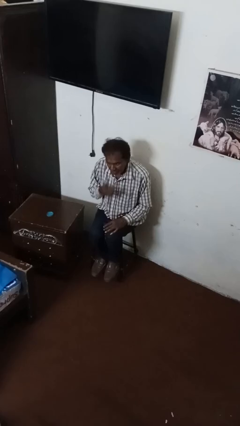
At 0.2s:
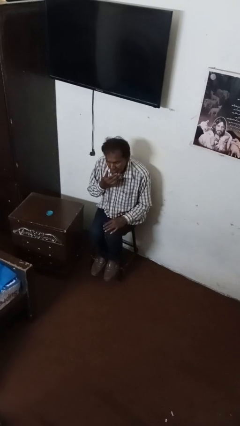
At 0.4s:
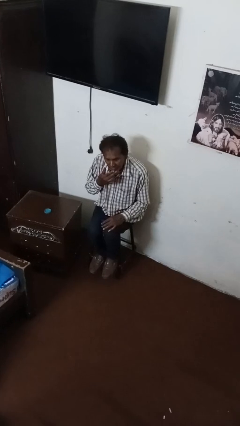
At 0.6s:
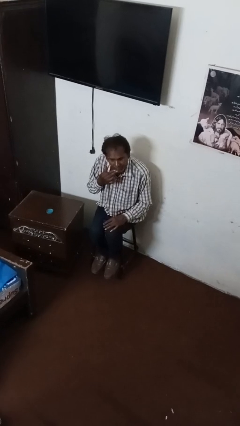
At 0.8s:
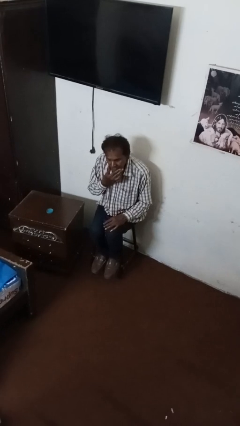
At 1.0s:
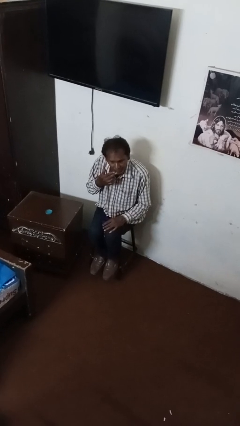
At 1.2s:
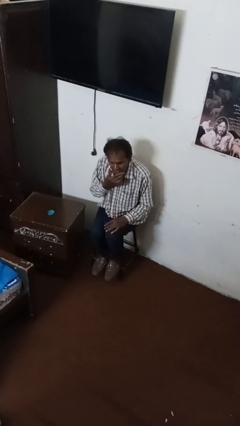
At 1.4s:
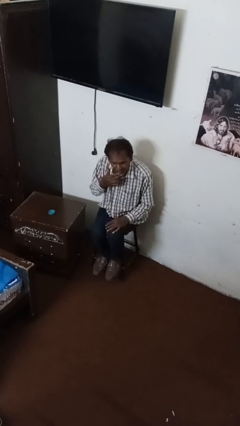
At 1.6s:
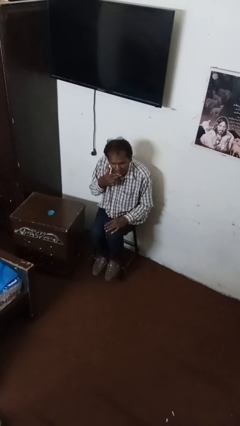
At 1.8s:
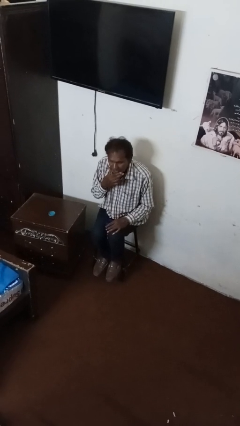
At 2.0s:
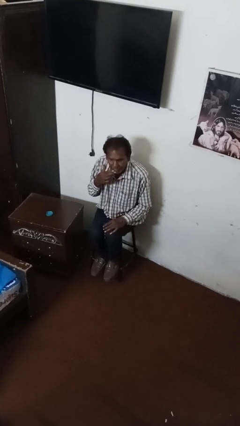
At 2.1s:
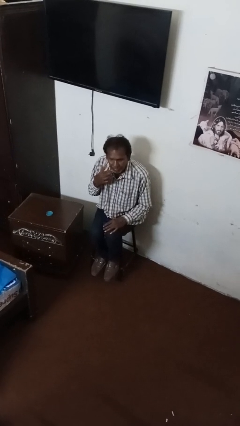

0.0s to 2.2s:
person strokes chin

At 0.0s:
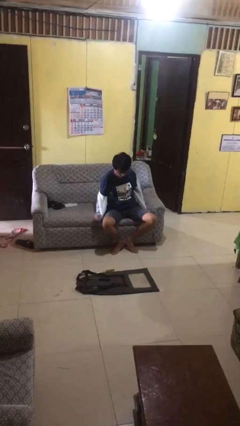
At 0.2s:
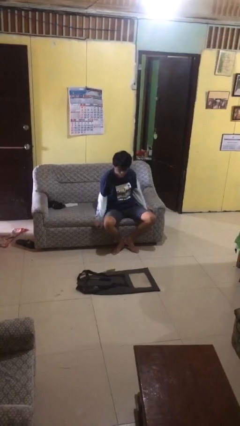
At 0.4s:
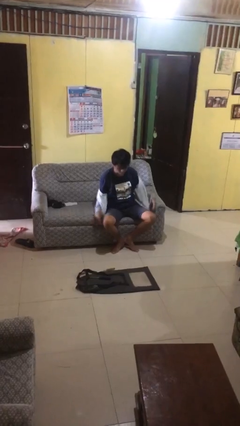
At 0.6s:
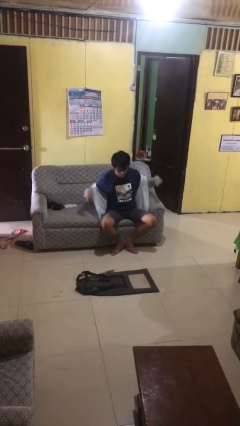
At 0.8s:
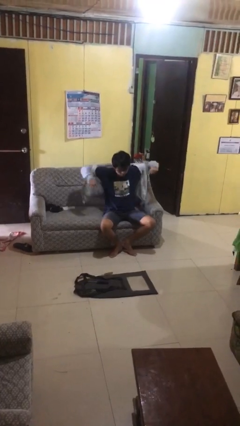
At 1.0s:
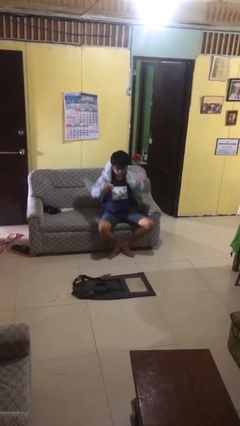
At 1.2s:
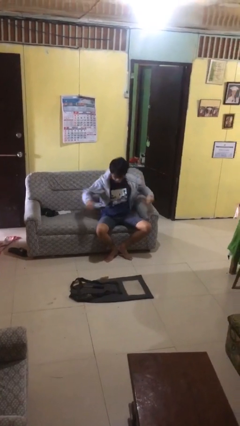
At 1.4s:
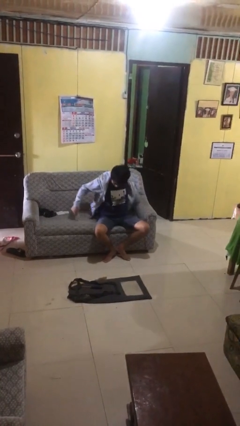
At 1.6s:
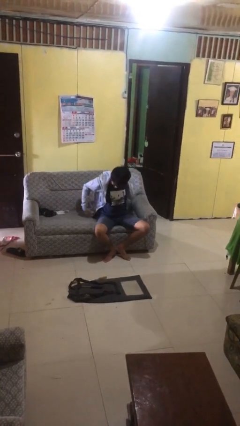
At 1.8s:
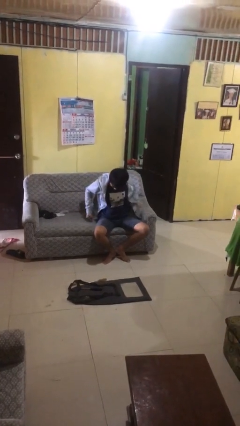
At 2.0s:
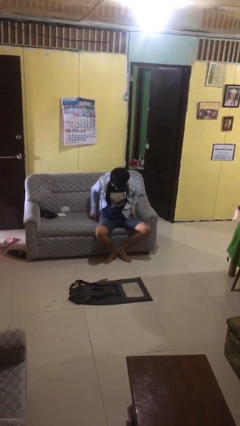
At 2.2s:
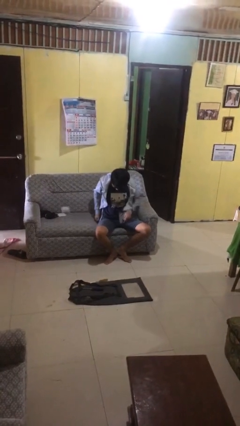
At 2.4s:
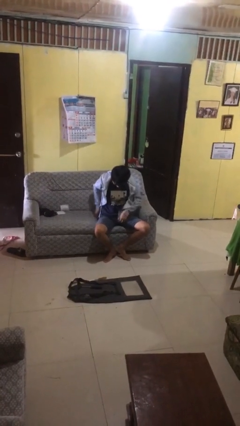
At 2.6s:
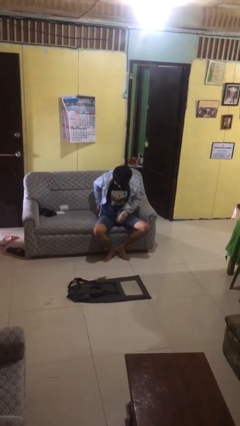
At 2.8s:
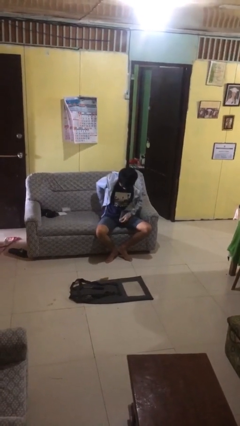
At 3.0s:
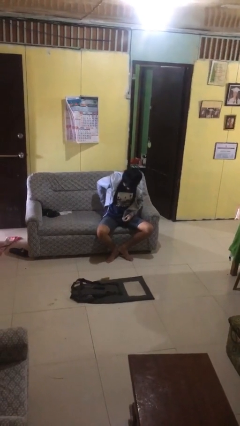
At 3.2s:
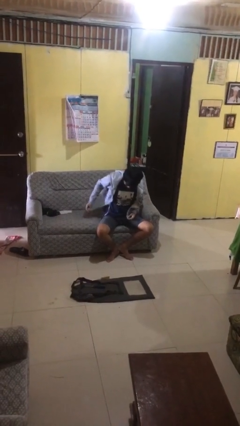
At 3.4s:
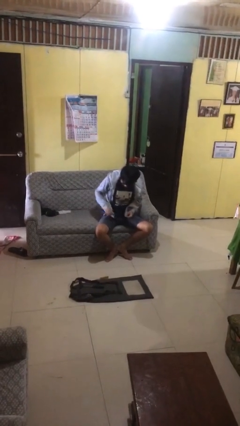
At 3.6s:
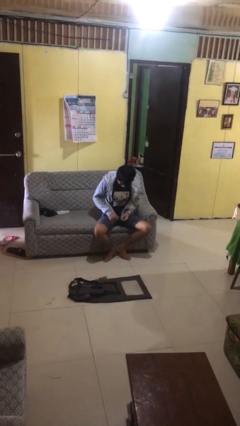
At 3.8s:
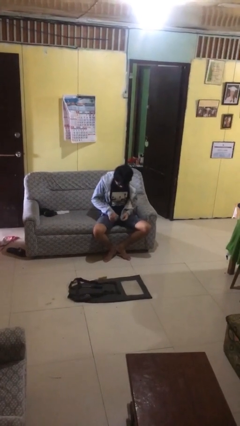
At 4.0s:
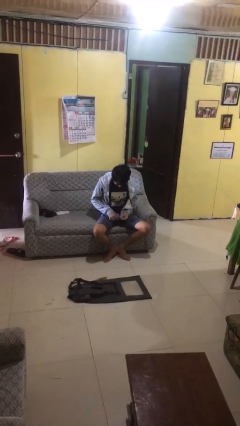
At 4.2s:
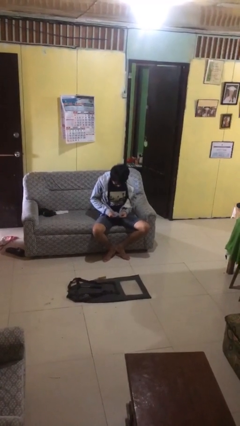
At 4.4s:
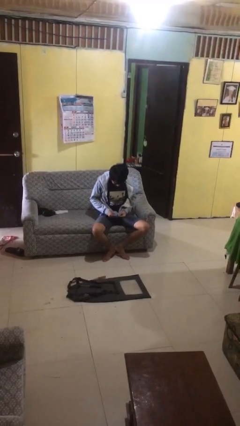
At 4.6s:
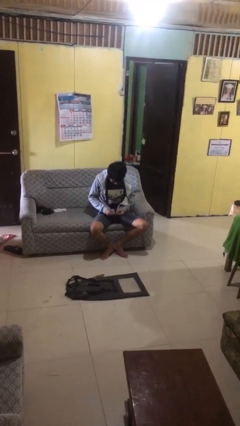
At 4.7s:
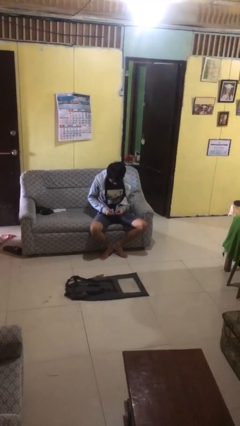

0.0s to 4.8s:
person puts on jacket

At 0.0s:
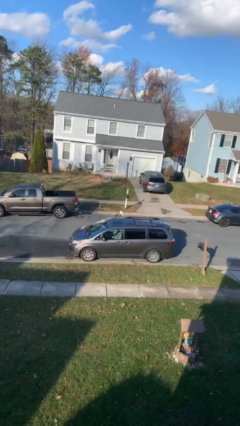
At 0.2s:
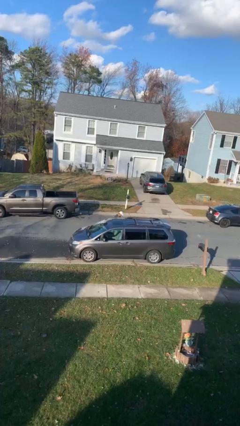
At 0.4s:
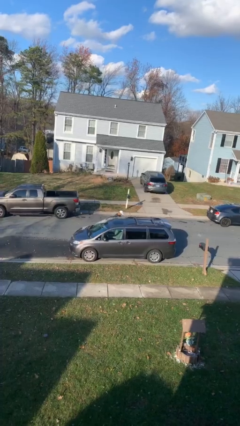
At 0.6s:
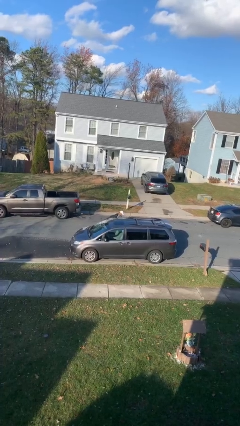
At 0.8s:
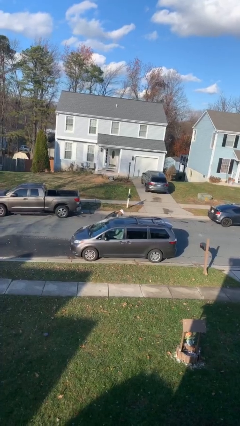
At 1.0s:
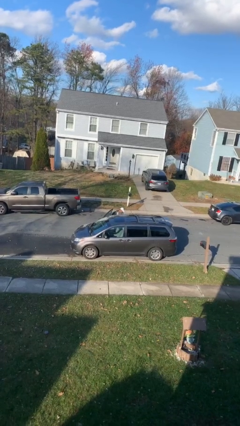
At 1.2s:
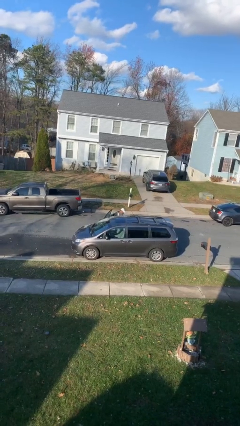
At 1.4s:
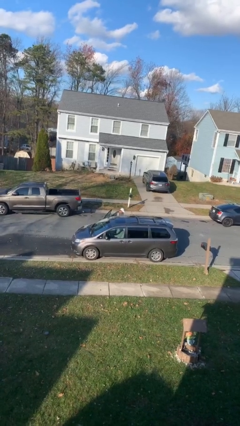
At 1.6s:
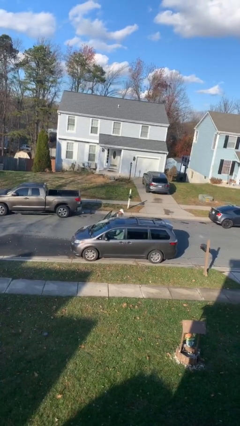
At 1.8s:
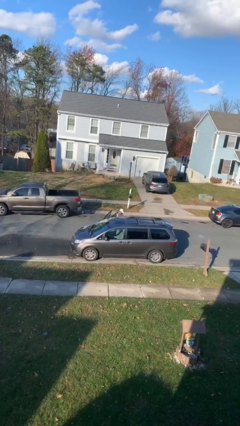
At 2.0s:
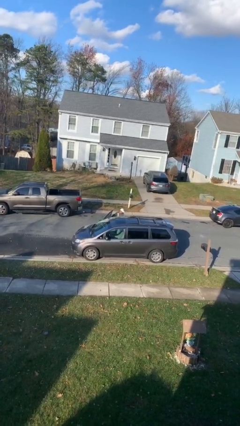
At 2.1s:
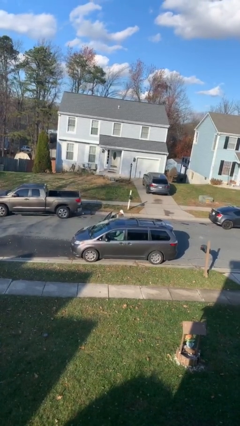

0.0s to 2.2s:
person opens car door

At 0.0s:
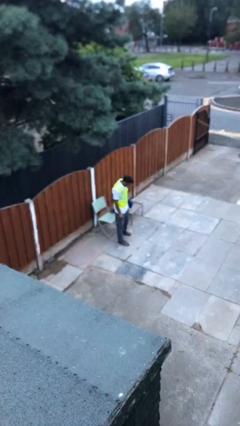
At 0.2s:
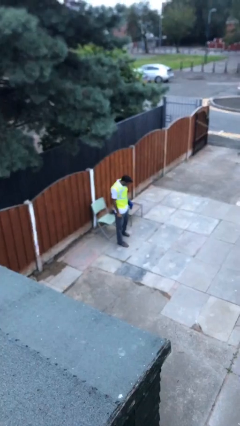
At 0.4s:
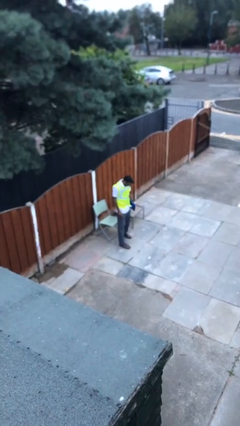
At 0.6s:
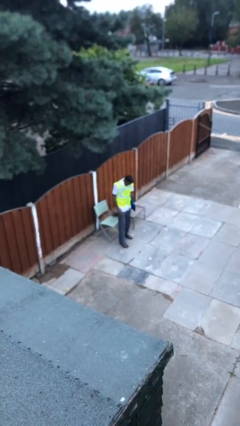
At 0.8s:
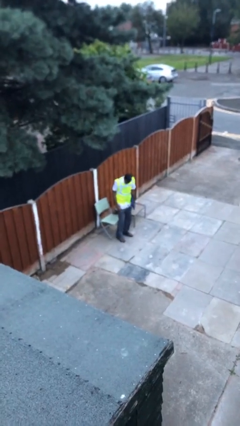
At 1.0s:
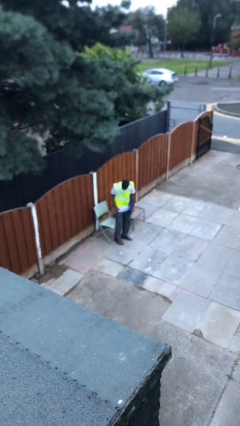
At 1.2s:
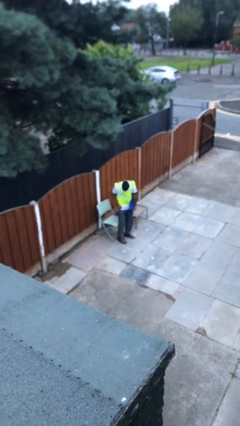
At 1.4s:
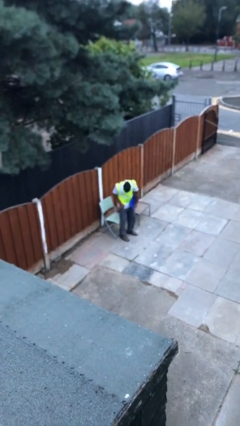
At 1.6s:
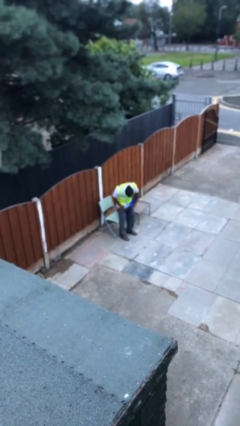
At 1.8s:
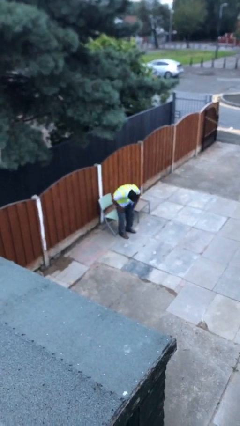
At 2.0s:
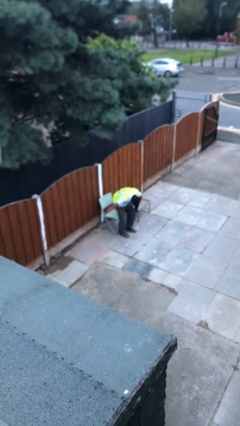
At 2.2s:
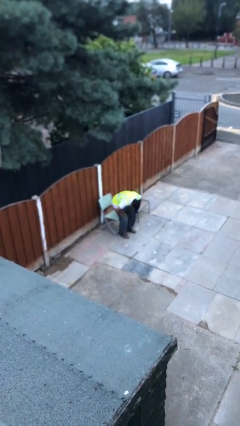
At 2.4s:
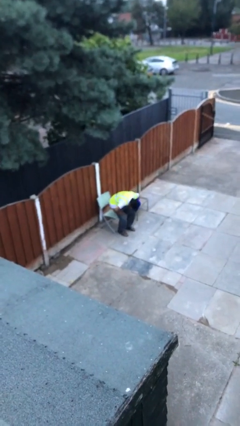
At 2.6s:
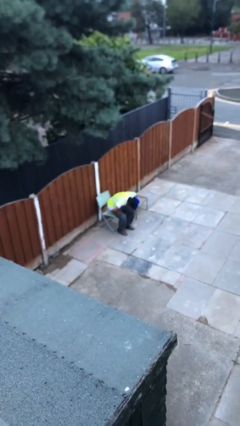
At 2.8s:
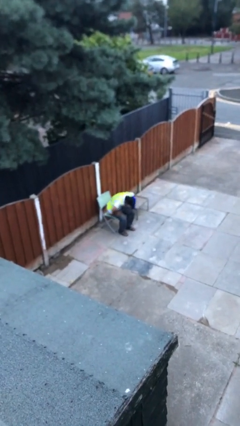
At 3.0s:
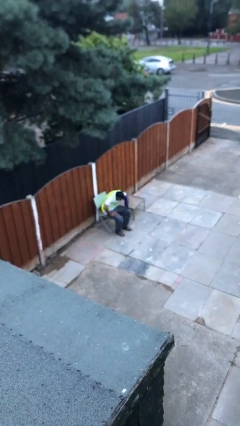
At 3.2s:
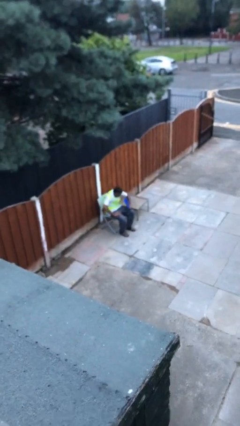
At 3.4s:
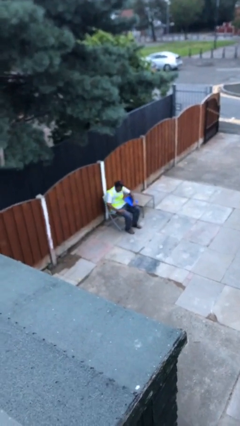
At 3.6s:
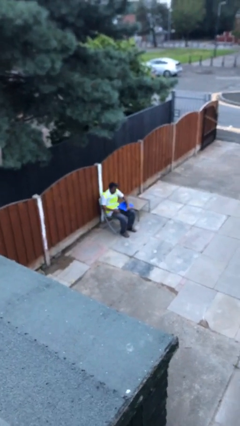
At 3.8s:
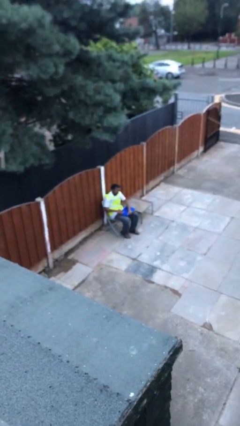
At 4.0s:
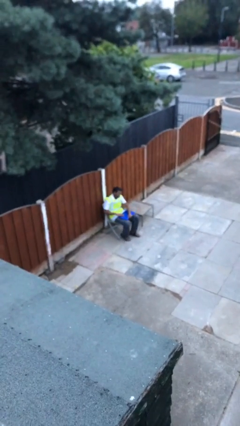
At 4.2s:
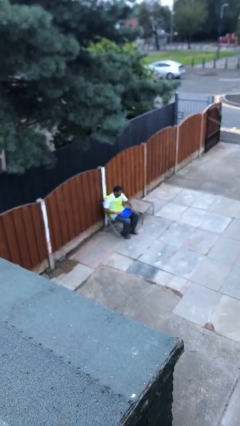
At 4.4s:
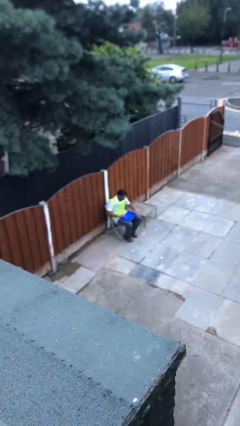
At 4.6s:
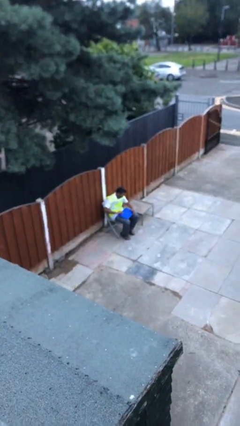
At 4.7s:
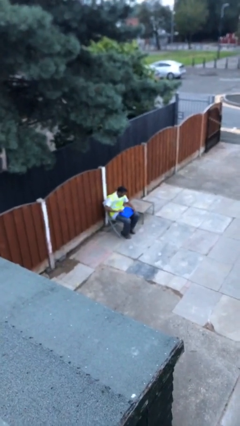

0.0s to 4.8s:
person sits down

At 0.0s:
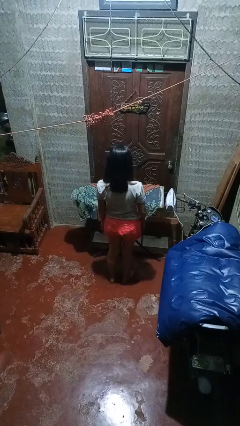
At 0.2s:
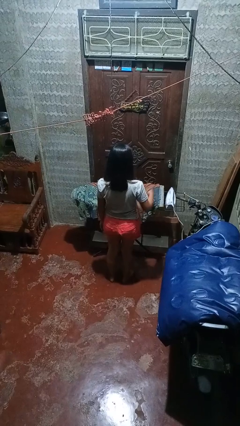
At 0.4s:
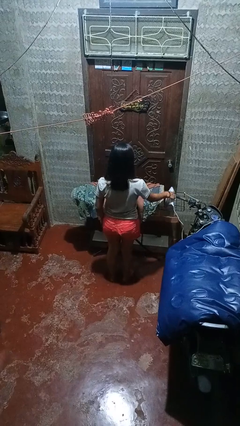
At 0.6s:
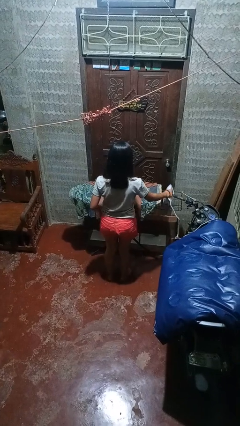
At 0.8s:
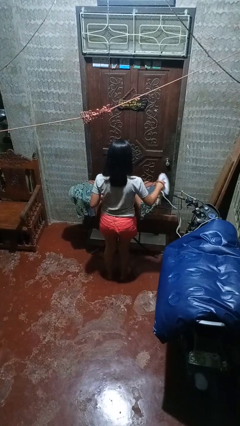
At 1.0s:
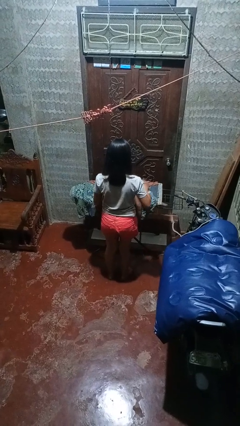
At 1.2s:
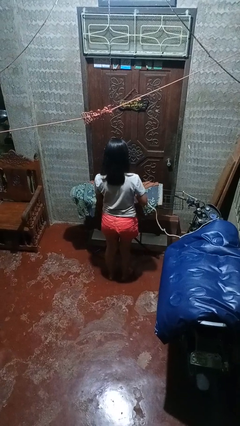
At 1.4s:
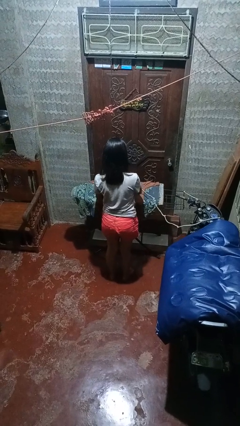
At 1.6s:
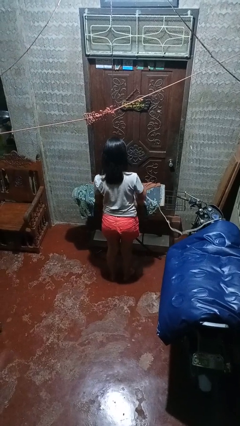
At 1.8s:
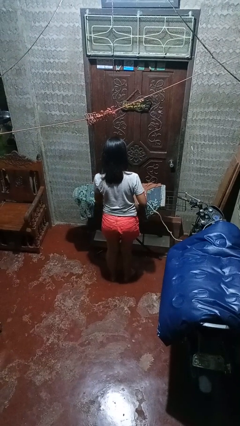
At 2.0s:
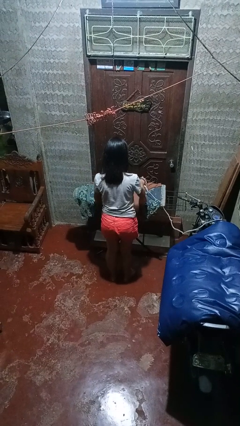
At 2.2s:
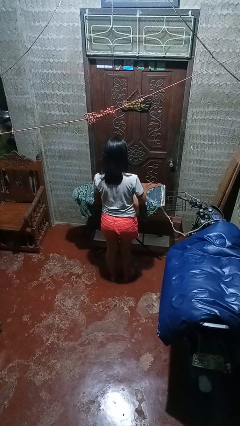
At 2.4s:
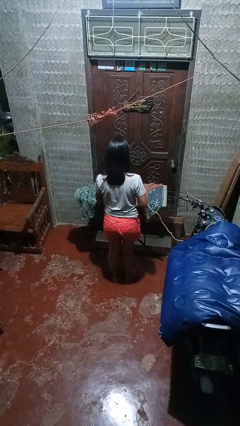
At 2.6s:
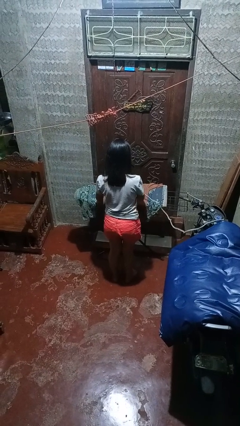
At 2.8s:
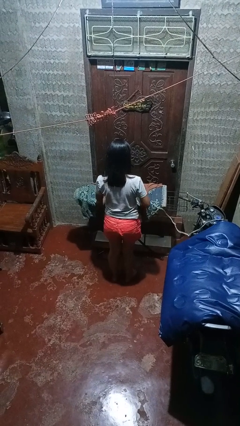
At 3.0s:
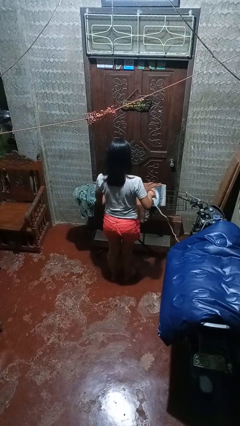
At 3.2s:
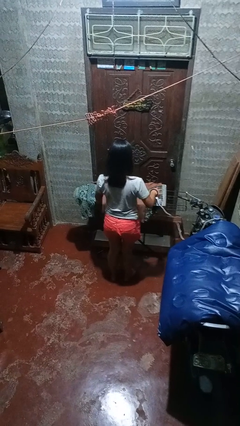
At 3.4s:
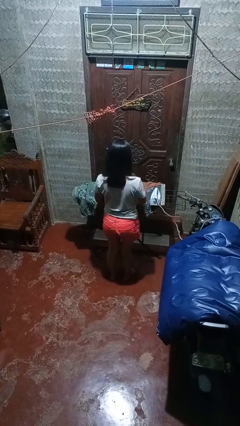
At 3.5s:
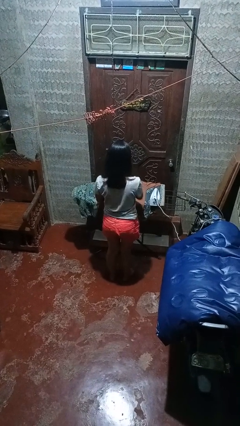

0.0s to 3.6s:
person irons clothes
